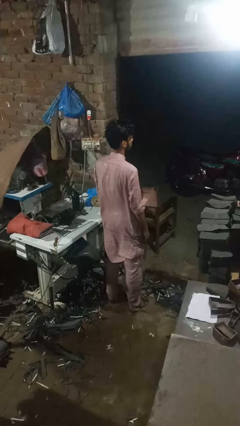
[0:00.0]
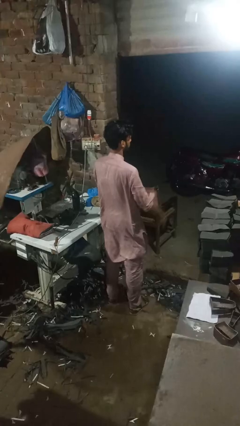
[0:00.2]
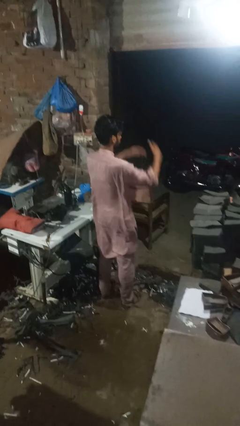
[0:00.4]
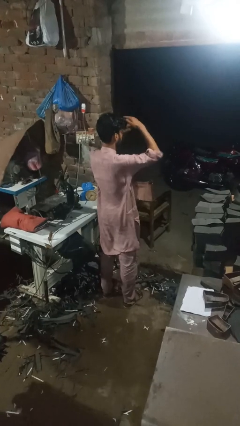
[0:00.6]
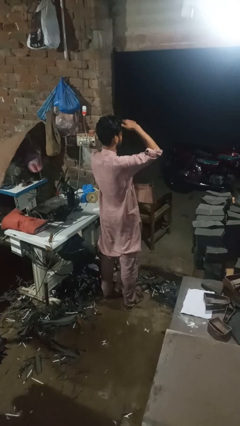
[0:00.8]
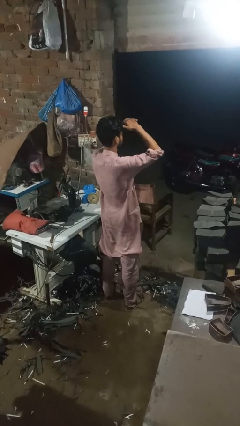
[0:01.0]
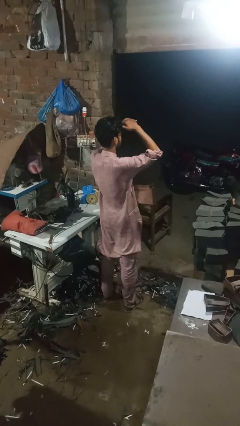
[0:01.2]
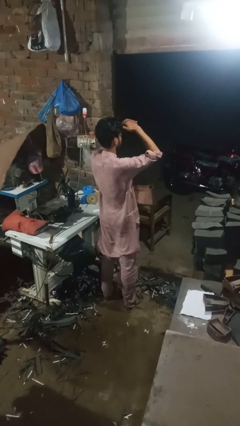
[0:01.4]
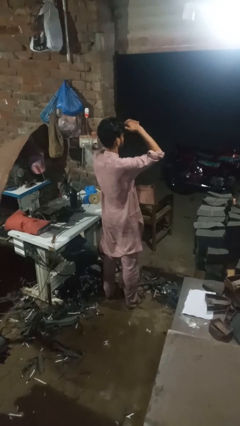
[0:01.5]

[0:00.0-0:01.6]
person shades eyes

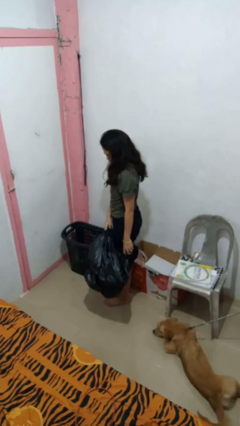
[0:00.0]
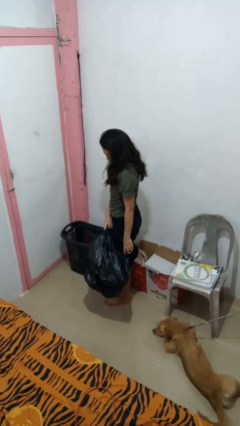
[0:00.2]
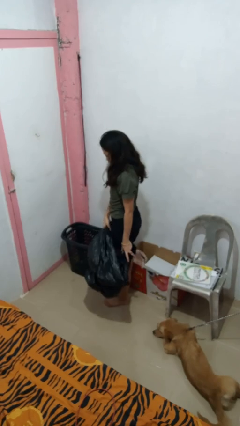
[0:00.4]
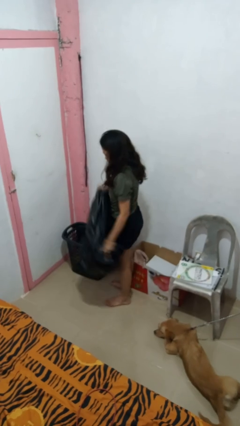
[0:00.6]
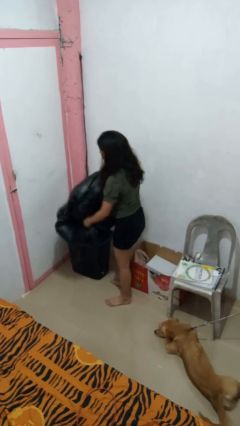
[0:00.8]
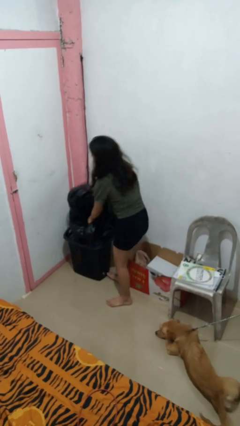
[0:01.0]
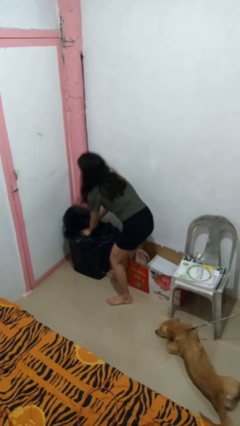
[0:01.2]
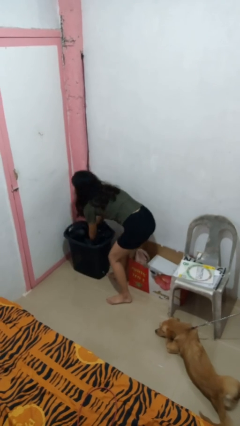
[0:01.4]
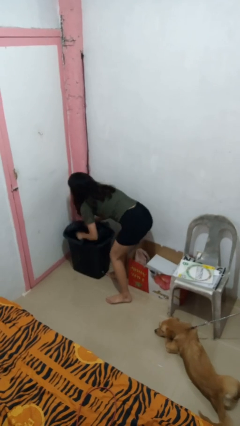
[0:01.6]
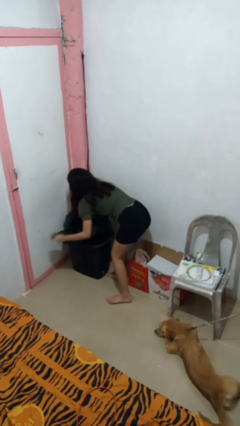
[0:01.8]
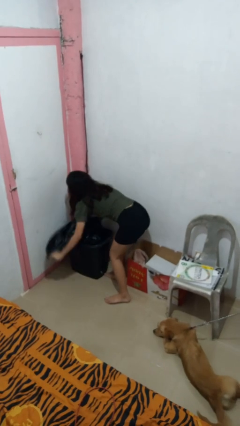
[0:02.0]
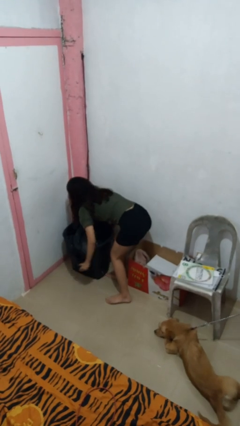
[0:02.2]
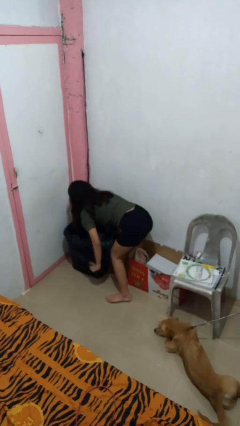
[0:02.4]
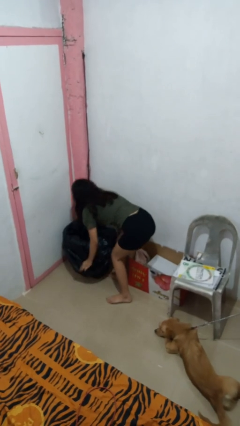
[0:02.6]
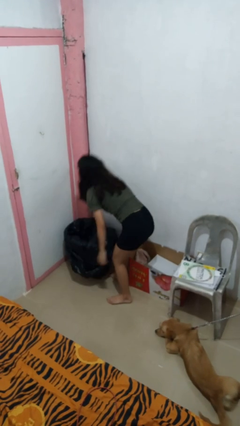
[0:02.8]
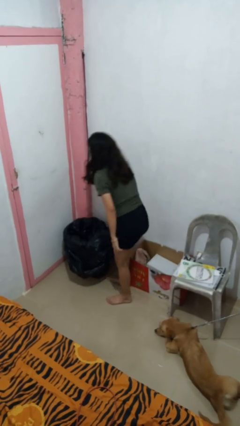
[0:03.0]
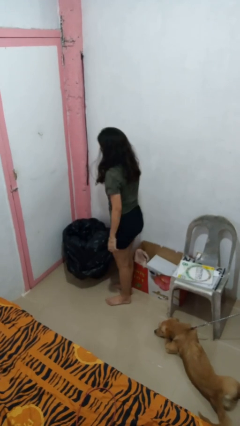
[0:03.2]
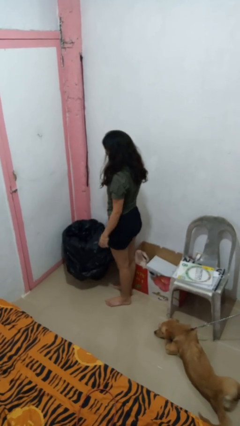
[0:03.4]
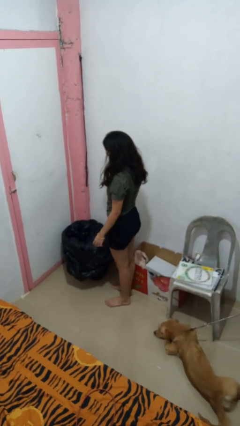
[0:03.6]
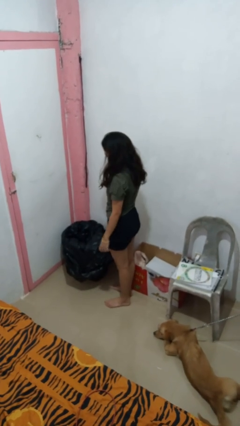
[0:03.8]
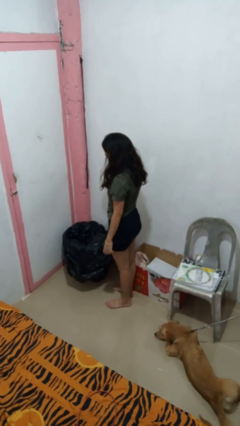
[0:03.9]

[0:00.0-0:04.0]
person inserts trashbag into trashcan

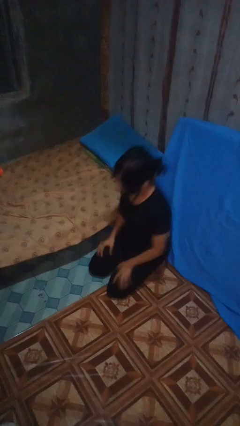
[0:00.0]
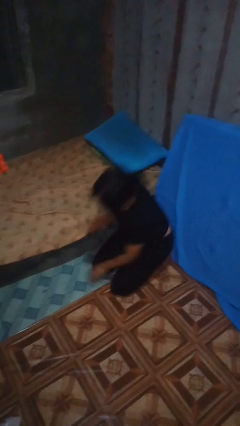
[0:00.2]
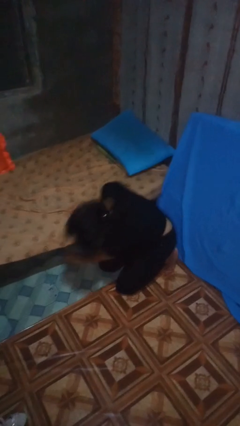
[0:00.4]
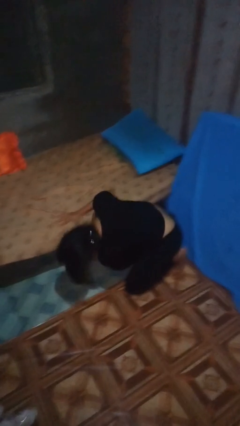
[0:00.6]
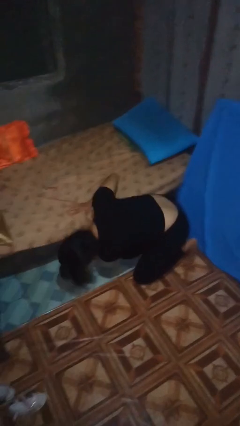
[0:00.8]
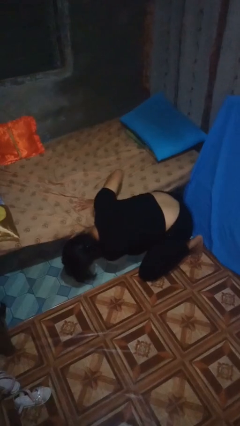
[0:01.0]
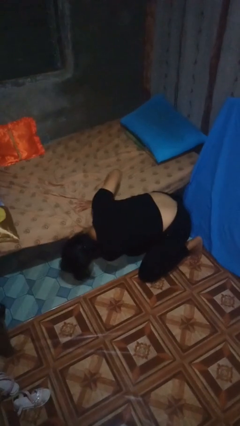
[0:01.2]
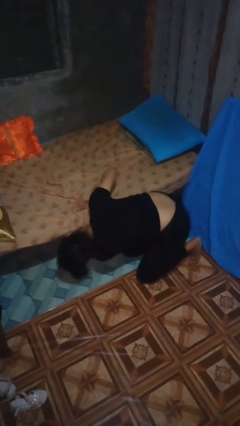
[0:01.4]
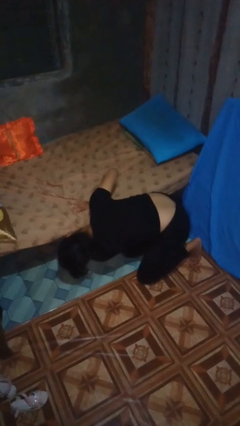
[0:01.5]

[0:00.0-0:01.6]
person searches under bed

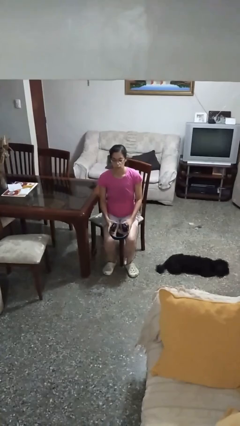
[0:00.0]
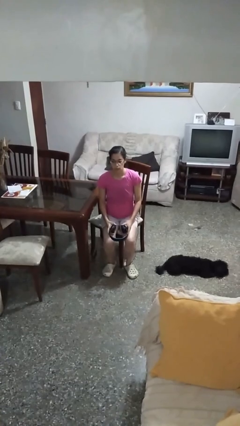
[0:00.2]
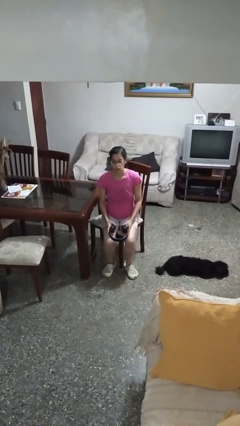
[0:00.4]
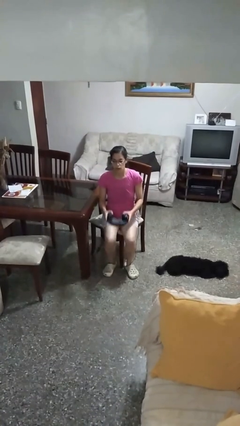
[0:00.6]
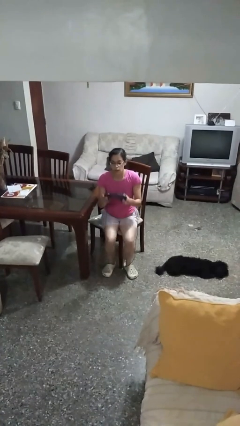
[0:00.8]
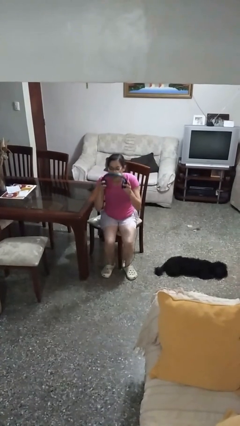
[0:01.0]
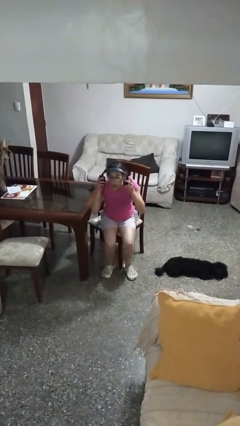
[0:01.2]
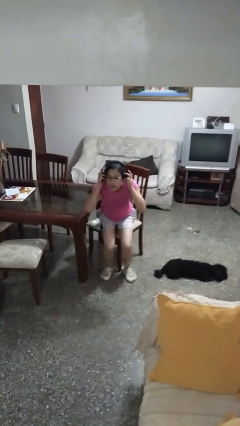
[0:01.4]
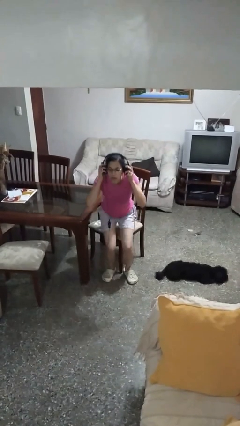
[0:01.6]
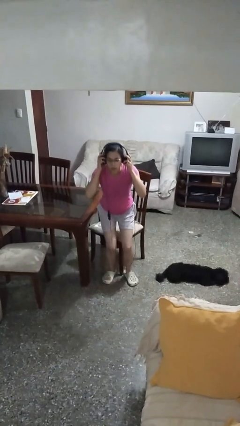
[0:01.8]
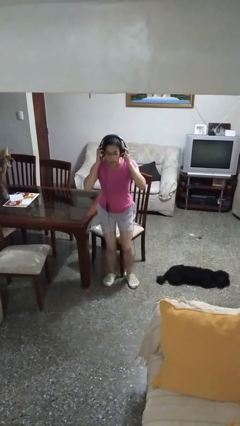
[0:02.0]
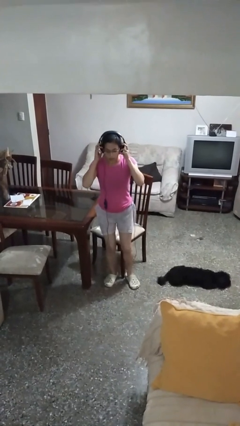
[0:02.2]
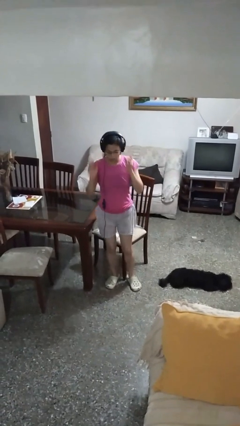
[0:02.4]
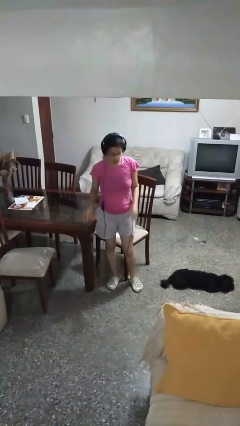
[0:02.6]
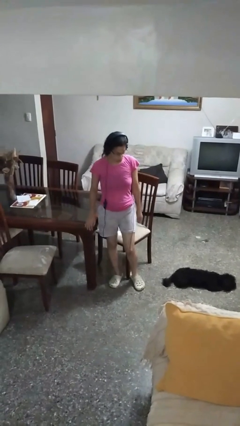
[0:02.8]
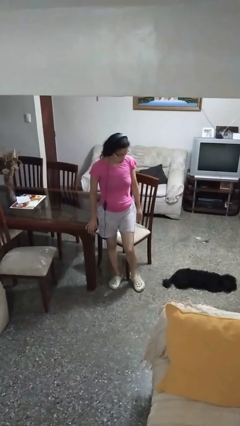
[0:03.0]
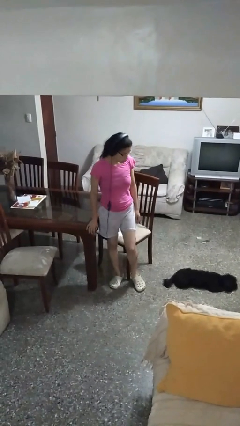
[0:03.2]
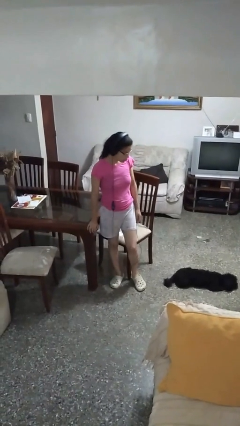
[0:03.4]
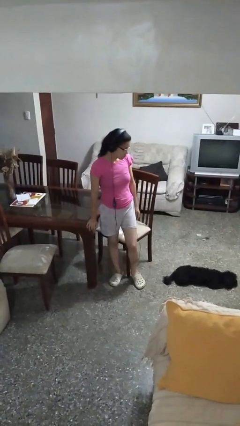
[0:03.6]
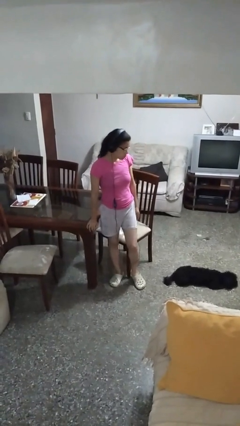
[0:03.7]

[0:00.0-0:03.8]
person puts on headphones

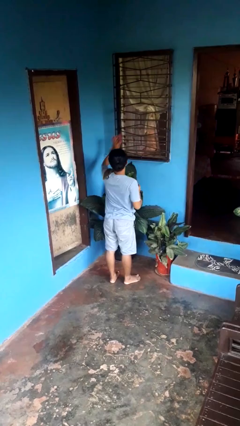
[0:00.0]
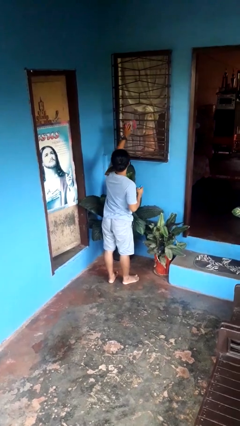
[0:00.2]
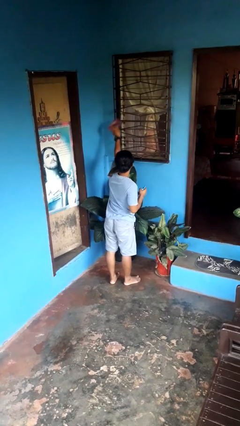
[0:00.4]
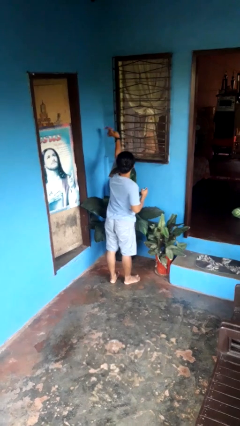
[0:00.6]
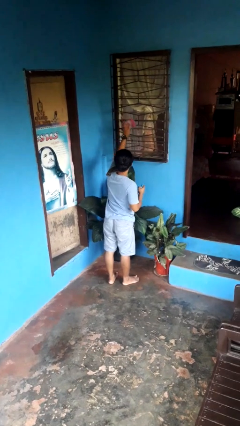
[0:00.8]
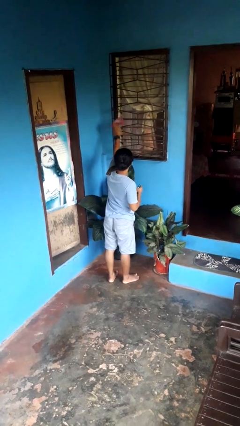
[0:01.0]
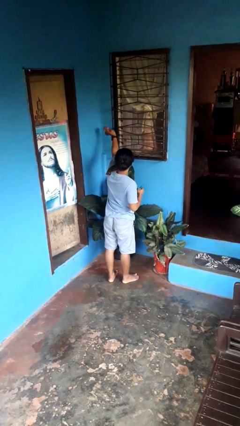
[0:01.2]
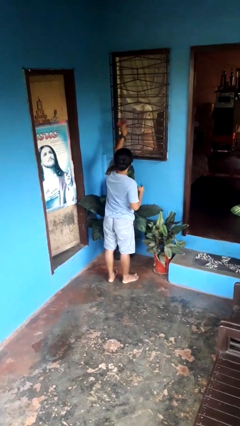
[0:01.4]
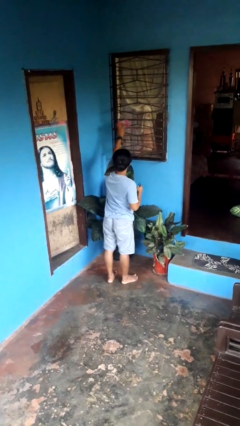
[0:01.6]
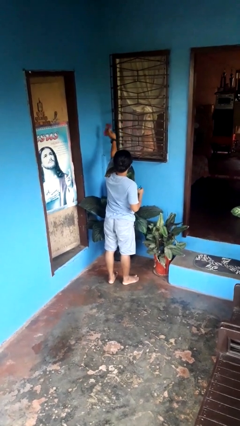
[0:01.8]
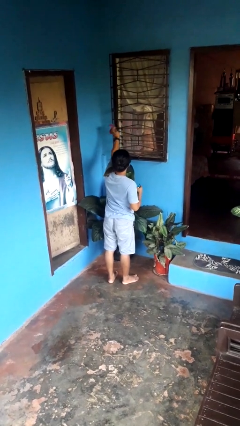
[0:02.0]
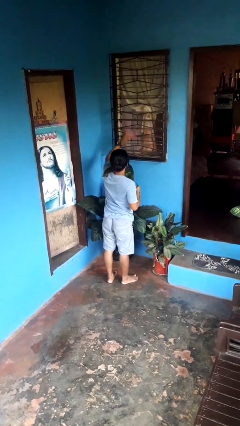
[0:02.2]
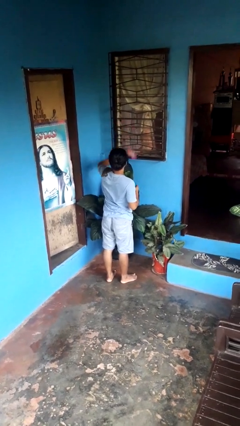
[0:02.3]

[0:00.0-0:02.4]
person washes window

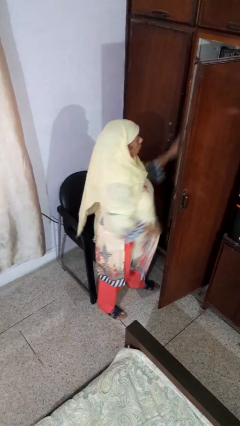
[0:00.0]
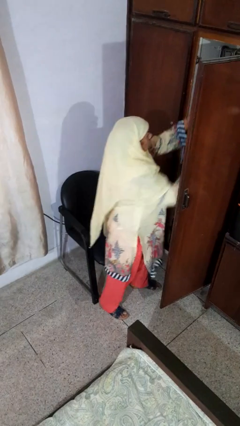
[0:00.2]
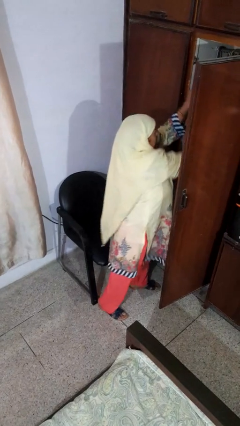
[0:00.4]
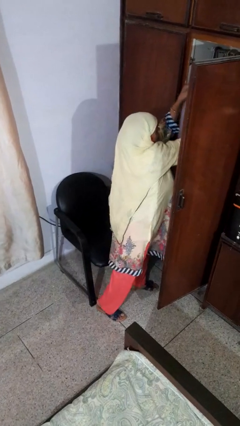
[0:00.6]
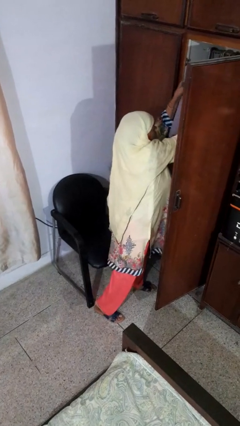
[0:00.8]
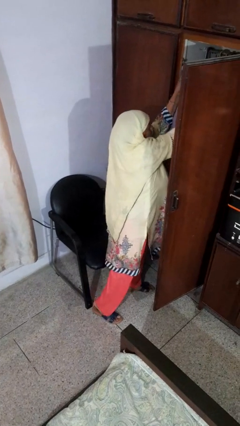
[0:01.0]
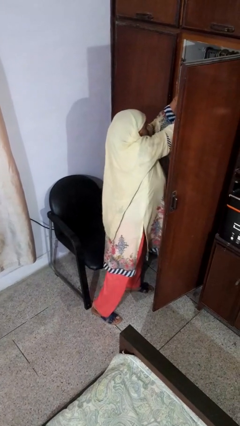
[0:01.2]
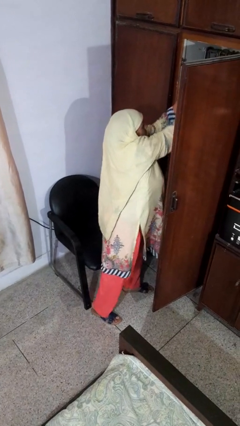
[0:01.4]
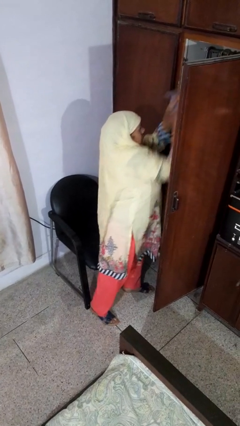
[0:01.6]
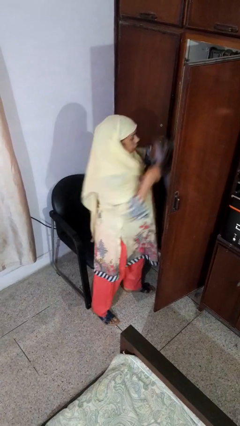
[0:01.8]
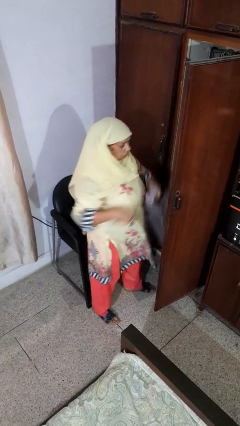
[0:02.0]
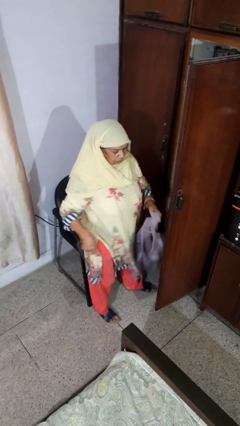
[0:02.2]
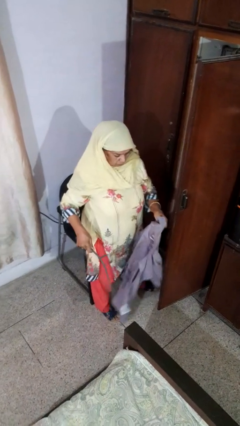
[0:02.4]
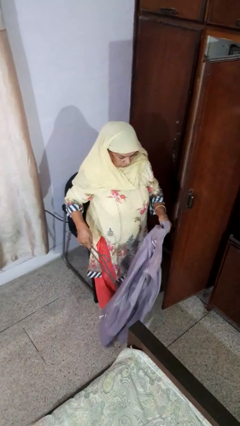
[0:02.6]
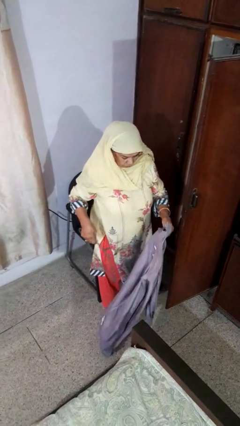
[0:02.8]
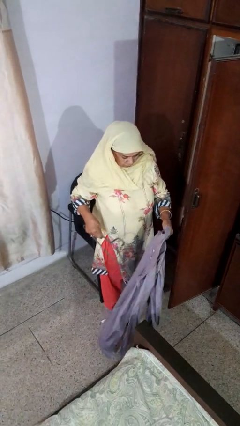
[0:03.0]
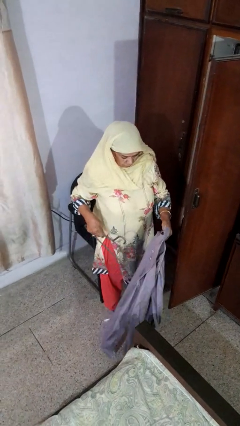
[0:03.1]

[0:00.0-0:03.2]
person takes clothes from closet

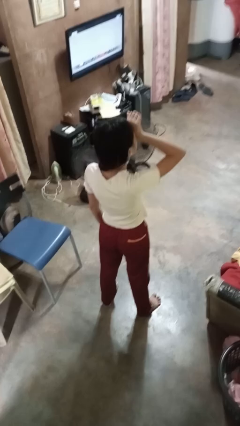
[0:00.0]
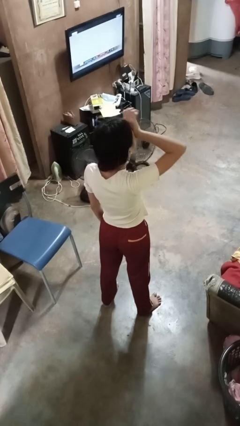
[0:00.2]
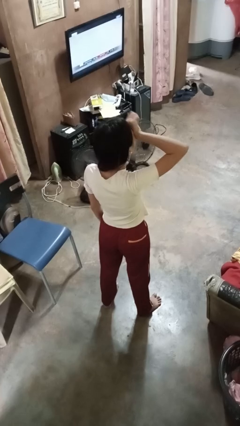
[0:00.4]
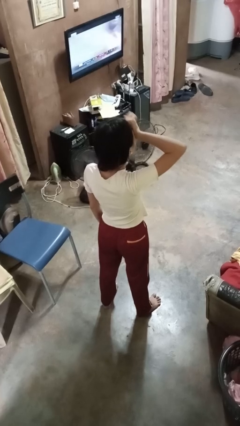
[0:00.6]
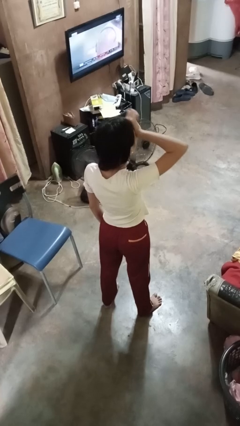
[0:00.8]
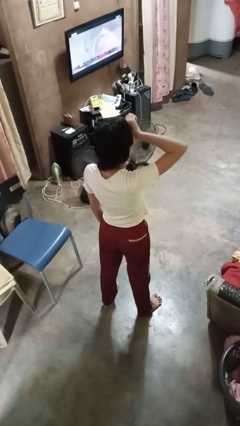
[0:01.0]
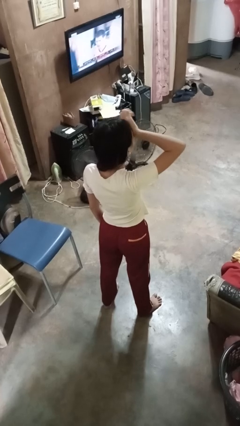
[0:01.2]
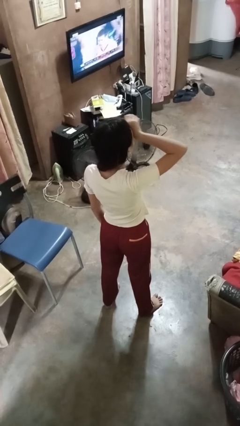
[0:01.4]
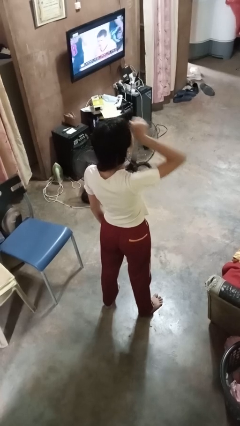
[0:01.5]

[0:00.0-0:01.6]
person rubs eyes
